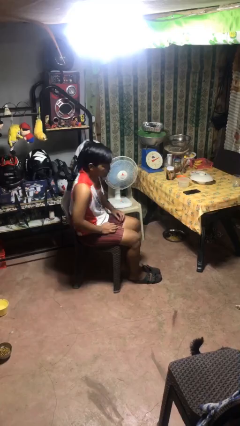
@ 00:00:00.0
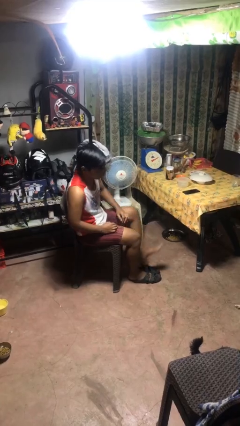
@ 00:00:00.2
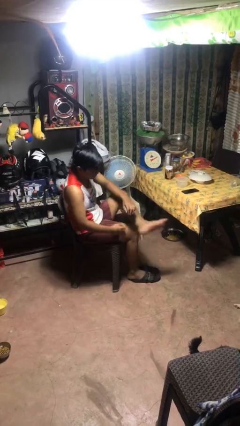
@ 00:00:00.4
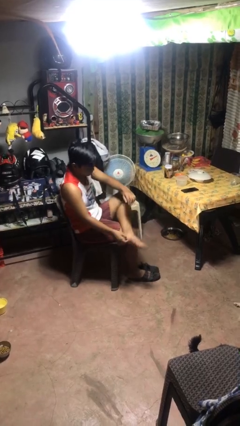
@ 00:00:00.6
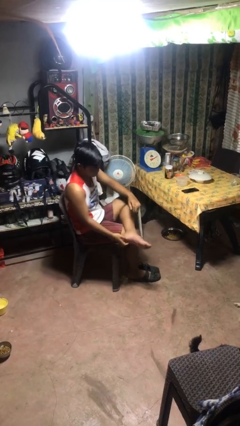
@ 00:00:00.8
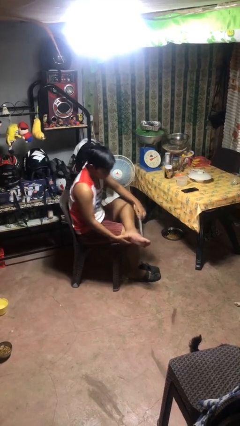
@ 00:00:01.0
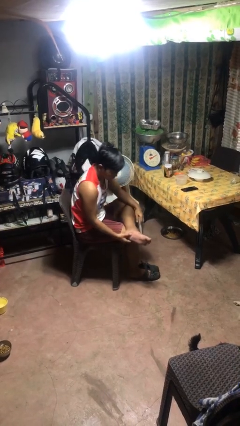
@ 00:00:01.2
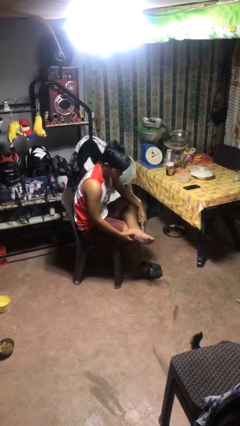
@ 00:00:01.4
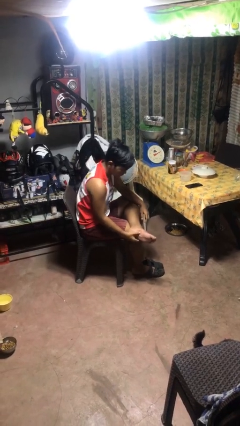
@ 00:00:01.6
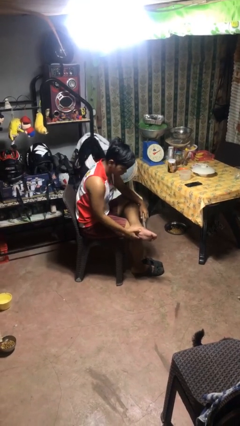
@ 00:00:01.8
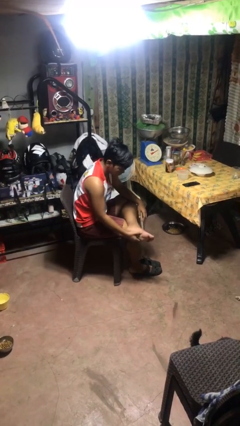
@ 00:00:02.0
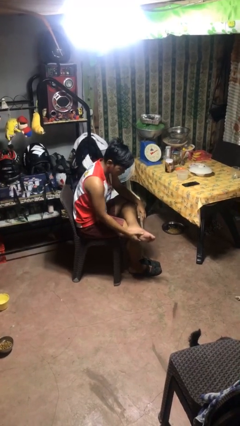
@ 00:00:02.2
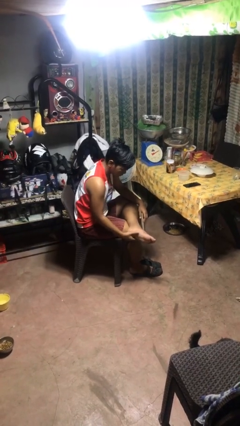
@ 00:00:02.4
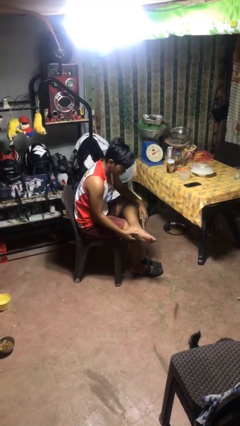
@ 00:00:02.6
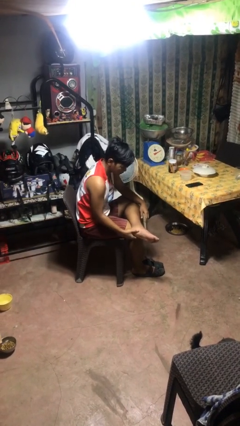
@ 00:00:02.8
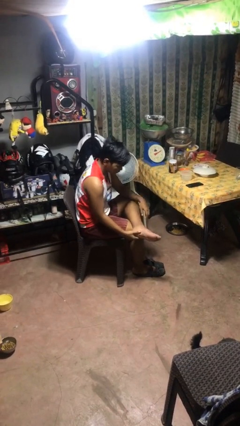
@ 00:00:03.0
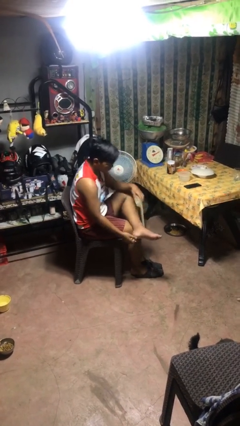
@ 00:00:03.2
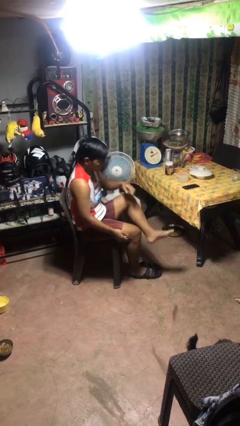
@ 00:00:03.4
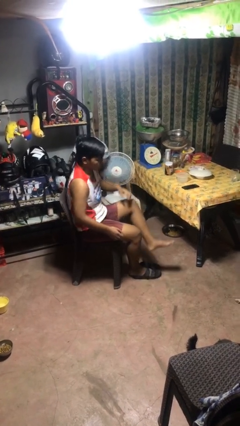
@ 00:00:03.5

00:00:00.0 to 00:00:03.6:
person rubs foot

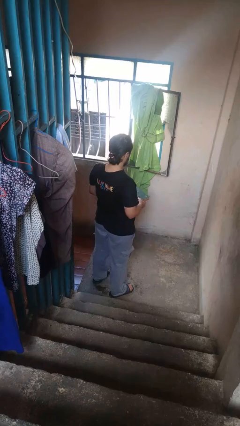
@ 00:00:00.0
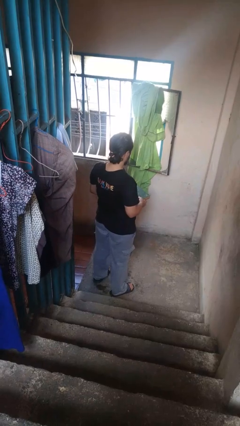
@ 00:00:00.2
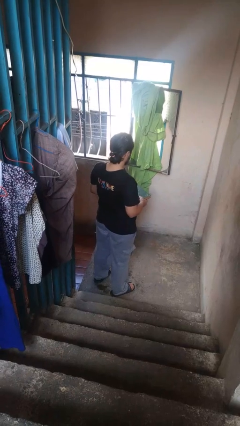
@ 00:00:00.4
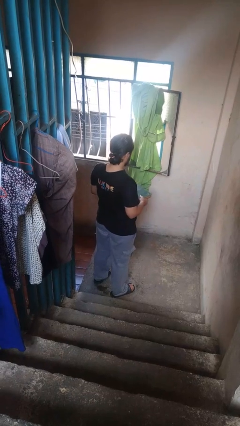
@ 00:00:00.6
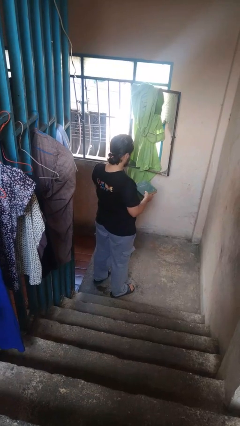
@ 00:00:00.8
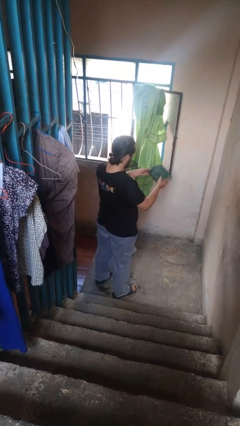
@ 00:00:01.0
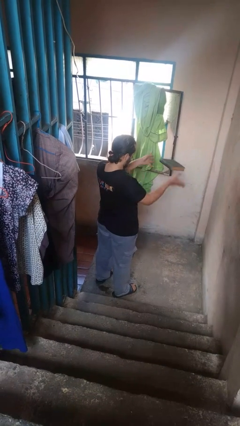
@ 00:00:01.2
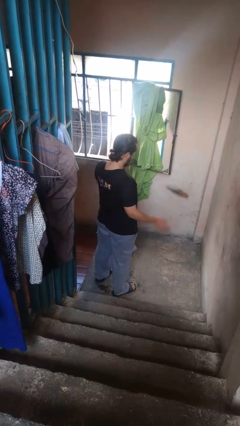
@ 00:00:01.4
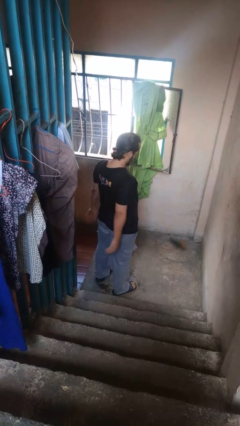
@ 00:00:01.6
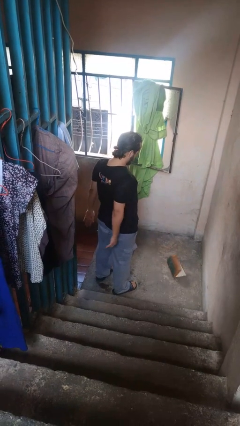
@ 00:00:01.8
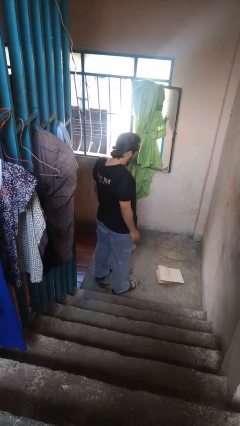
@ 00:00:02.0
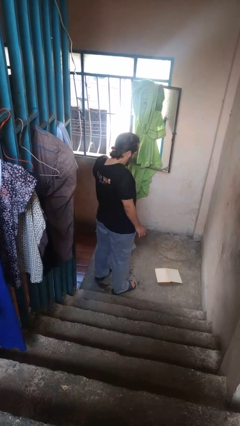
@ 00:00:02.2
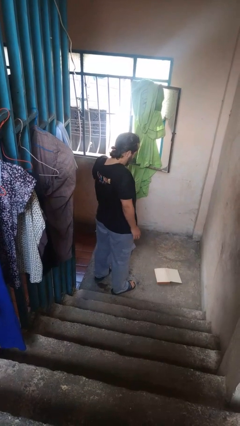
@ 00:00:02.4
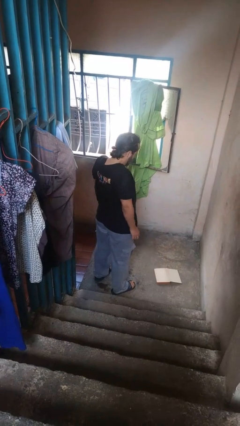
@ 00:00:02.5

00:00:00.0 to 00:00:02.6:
person throws object into air

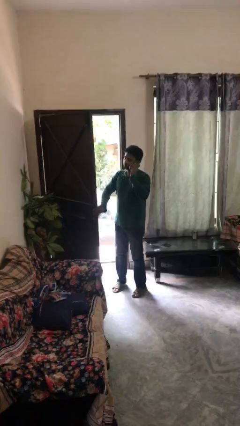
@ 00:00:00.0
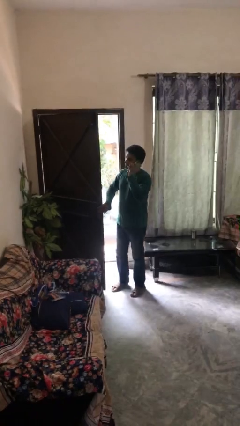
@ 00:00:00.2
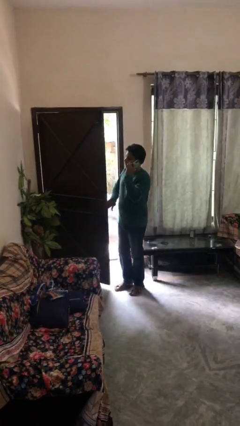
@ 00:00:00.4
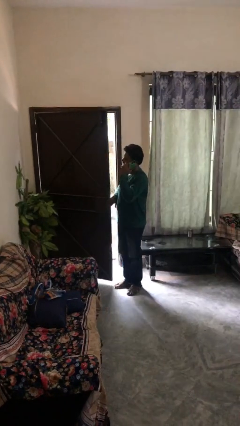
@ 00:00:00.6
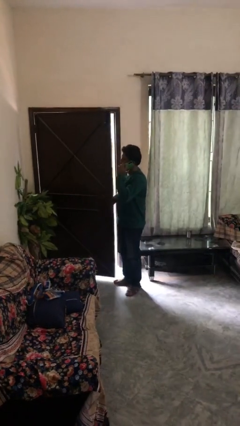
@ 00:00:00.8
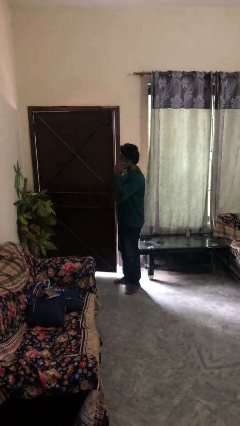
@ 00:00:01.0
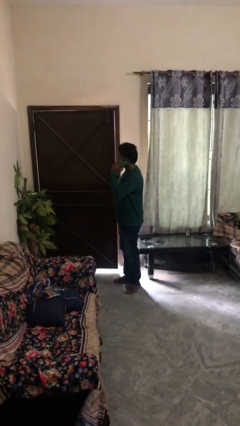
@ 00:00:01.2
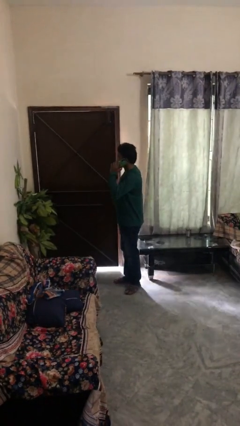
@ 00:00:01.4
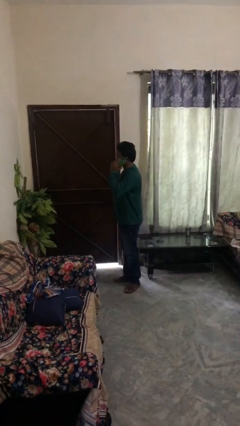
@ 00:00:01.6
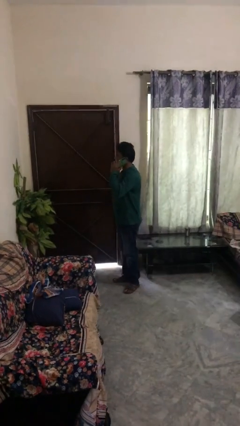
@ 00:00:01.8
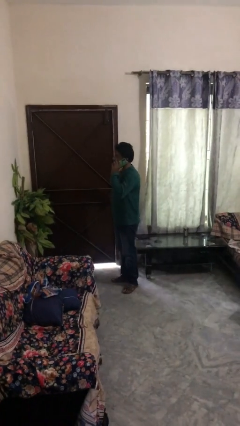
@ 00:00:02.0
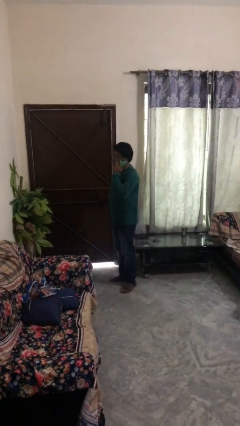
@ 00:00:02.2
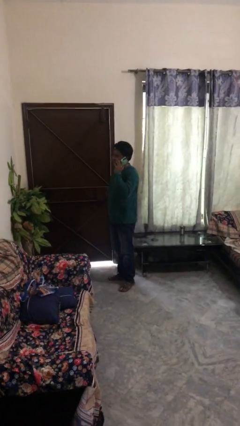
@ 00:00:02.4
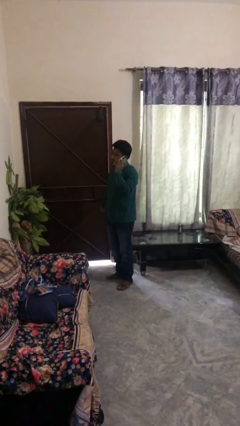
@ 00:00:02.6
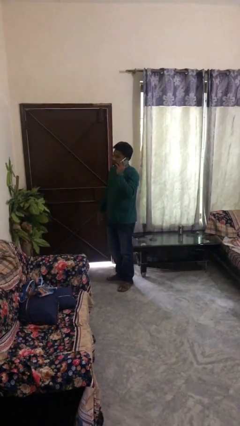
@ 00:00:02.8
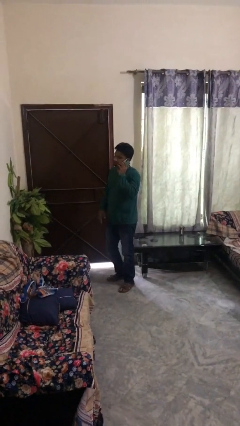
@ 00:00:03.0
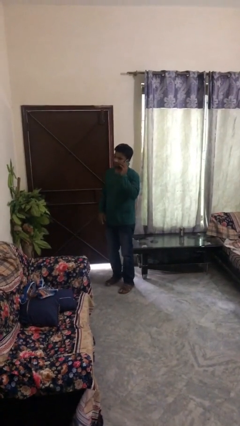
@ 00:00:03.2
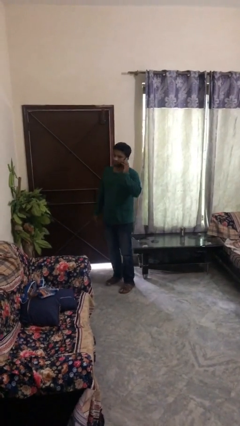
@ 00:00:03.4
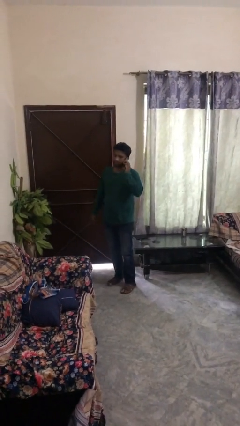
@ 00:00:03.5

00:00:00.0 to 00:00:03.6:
person closes facility door

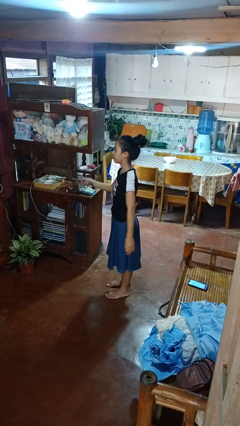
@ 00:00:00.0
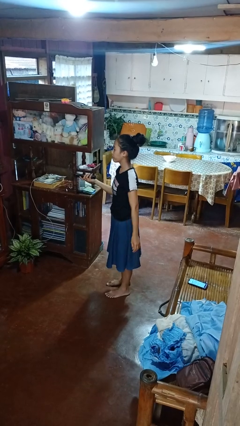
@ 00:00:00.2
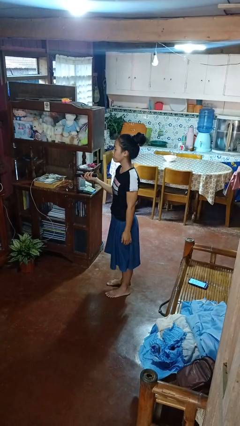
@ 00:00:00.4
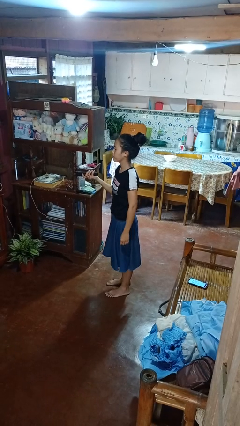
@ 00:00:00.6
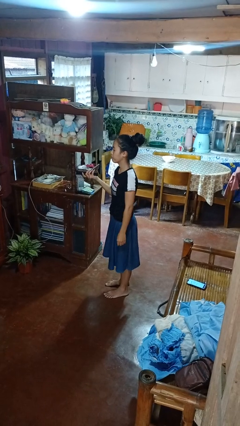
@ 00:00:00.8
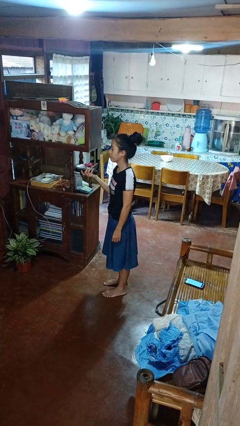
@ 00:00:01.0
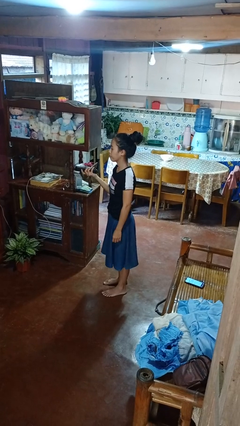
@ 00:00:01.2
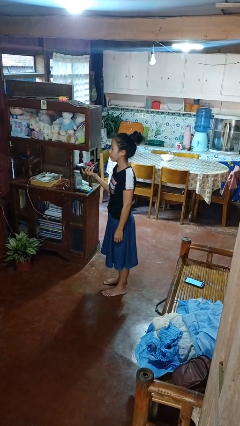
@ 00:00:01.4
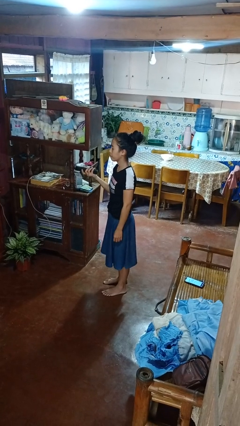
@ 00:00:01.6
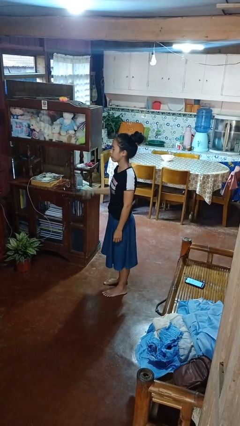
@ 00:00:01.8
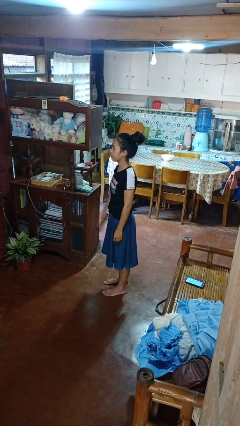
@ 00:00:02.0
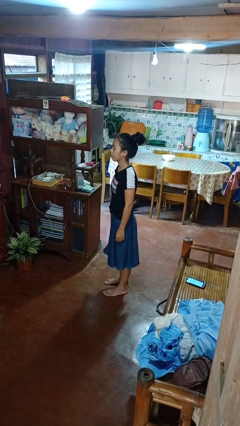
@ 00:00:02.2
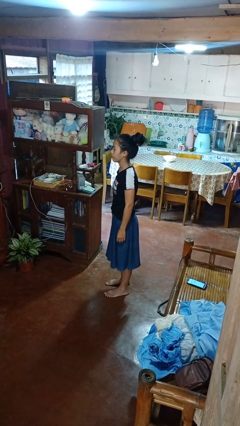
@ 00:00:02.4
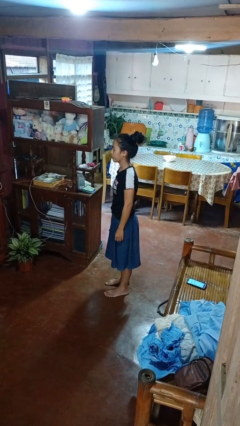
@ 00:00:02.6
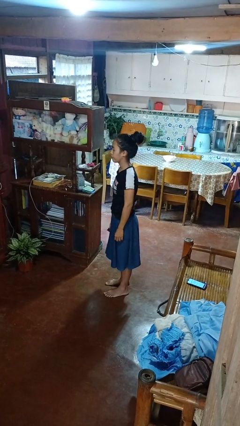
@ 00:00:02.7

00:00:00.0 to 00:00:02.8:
person uses television remote

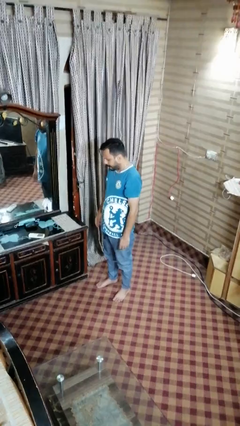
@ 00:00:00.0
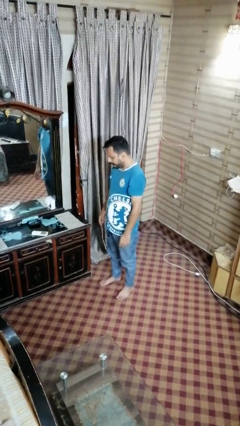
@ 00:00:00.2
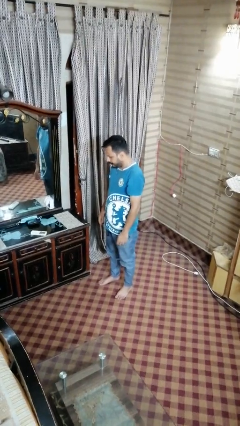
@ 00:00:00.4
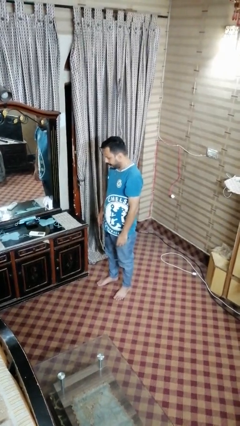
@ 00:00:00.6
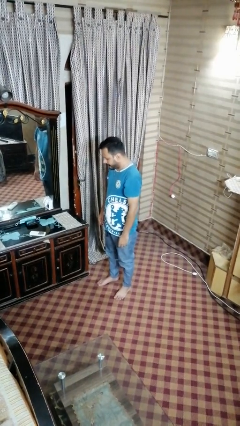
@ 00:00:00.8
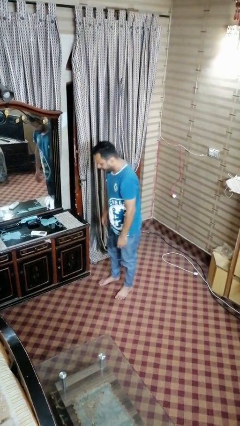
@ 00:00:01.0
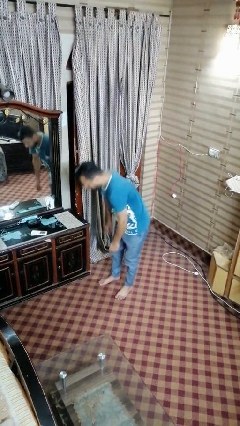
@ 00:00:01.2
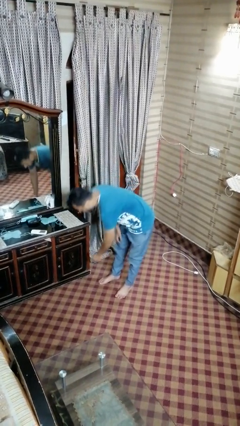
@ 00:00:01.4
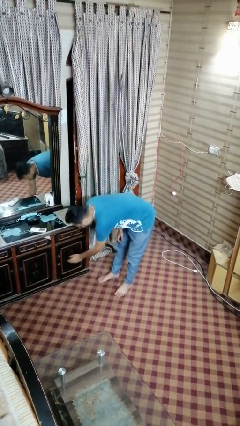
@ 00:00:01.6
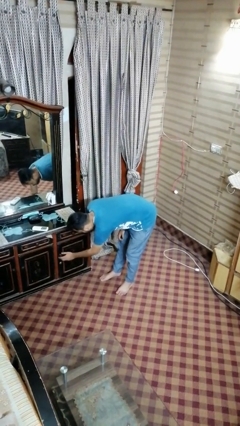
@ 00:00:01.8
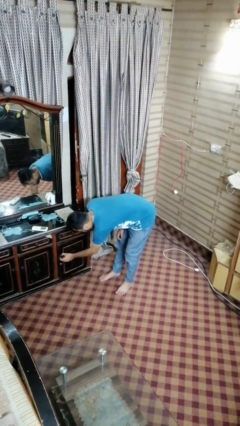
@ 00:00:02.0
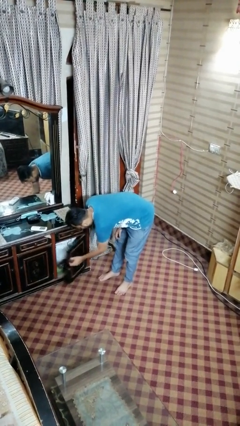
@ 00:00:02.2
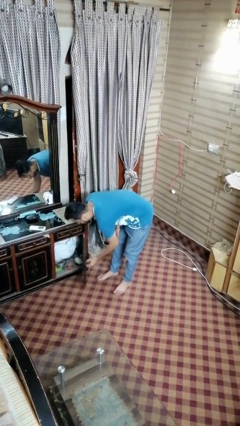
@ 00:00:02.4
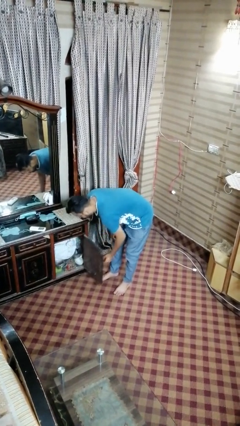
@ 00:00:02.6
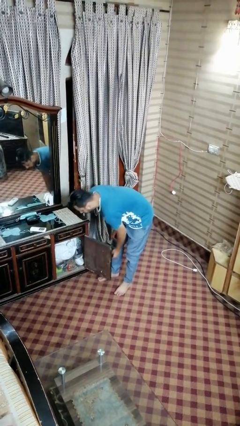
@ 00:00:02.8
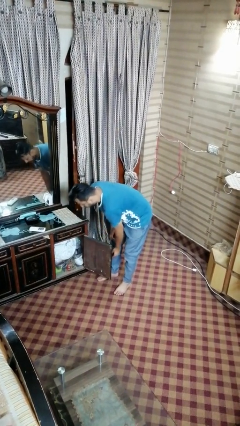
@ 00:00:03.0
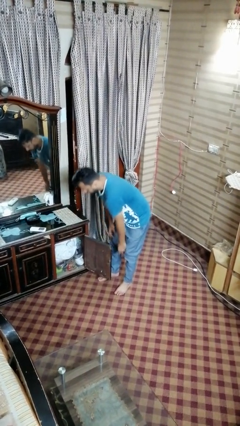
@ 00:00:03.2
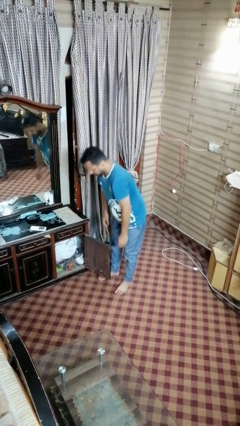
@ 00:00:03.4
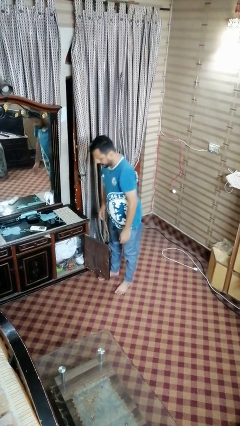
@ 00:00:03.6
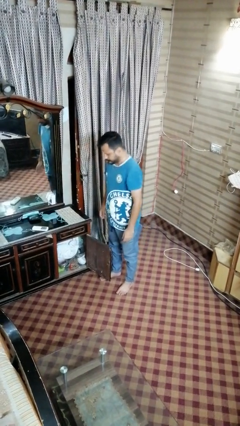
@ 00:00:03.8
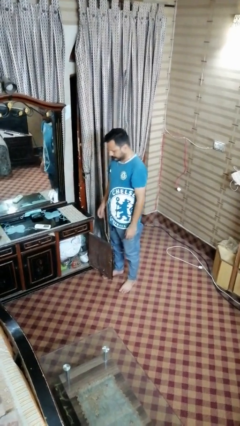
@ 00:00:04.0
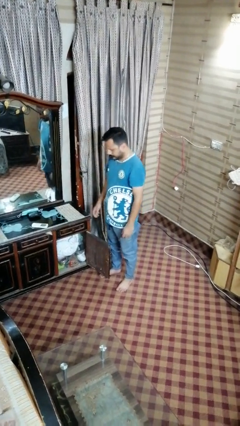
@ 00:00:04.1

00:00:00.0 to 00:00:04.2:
person opens dresser drawer

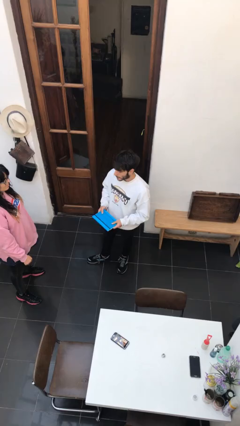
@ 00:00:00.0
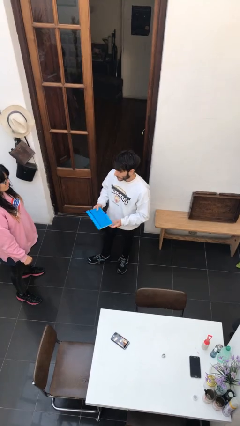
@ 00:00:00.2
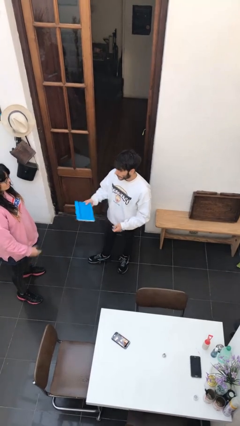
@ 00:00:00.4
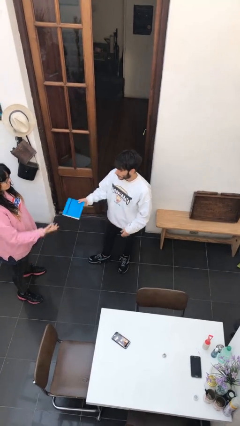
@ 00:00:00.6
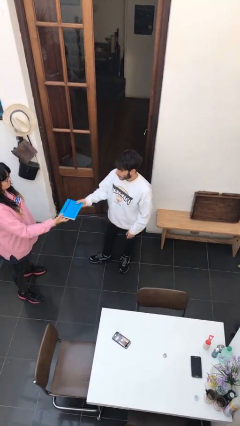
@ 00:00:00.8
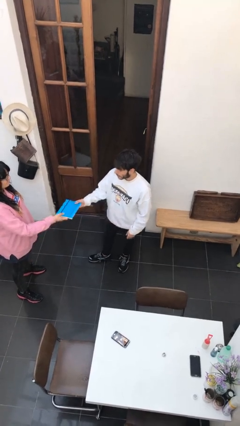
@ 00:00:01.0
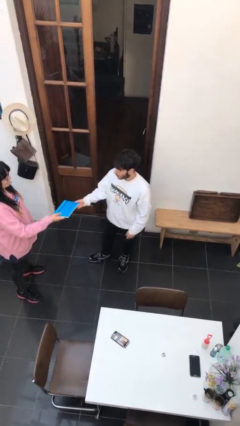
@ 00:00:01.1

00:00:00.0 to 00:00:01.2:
person transfers object to person
